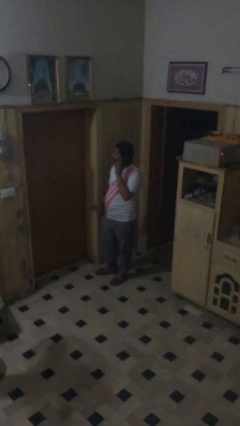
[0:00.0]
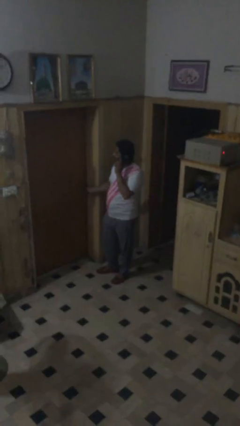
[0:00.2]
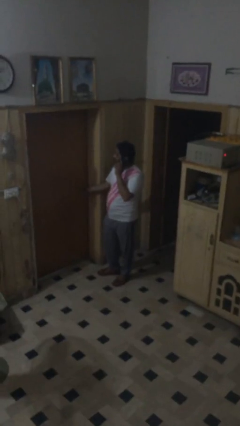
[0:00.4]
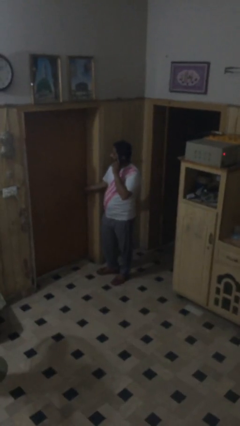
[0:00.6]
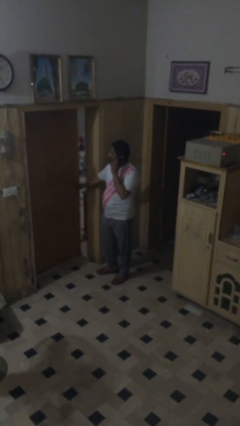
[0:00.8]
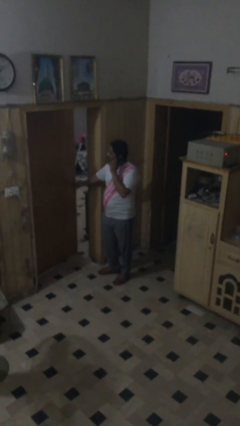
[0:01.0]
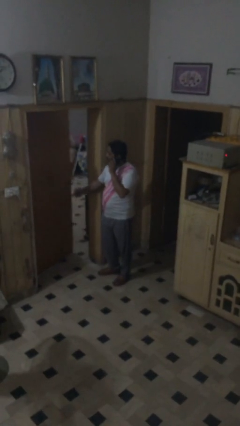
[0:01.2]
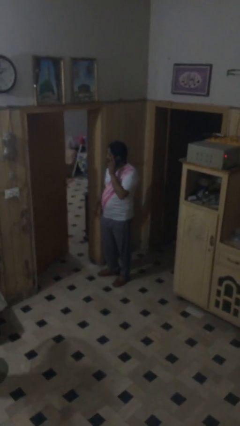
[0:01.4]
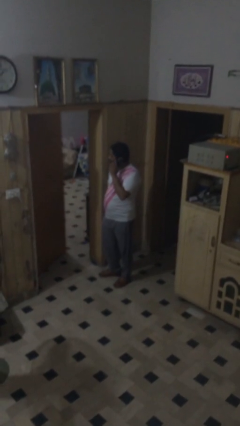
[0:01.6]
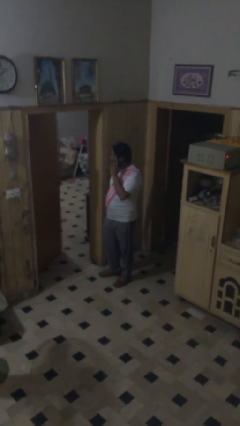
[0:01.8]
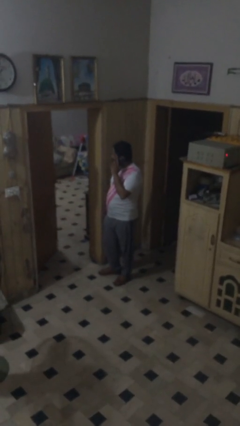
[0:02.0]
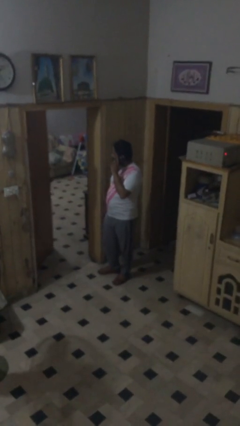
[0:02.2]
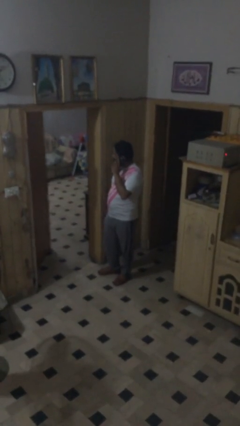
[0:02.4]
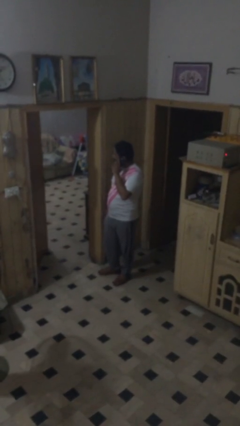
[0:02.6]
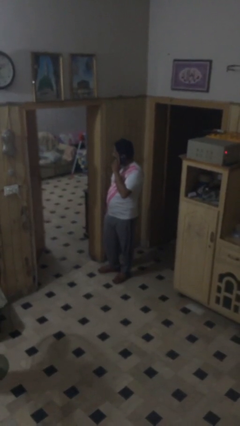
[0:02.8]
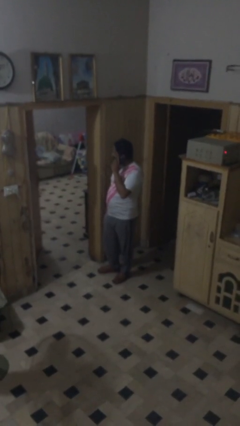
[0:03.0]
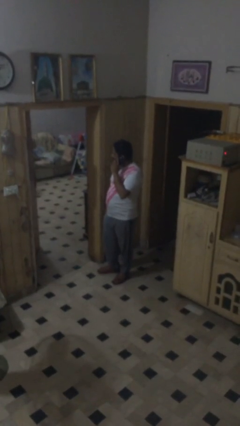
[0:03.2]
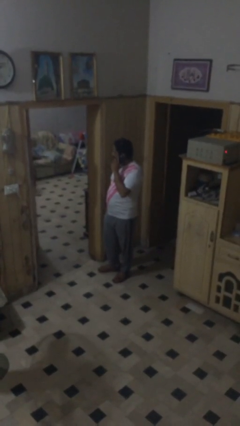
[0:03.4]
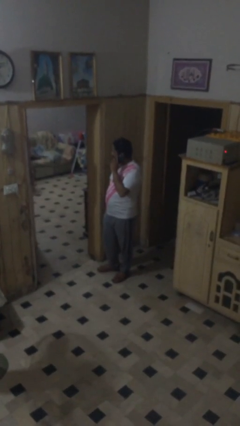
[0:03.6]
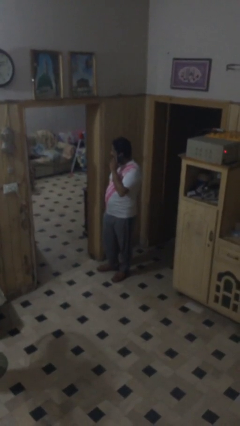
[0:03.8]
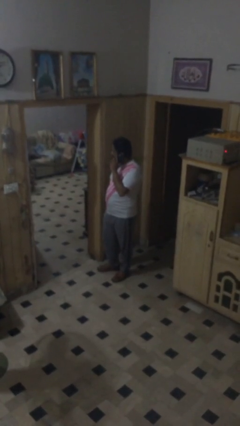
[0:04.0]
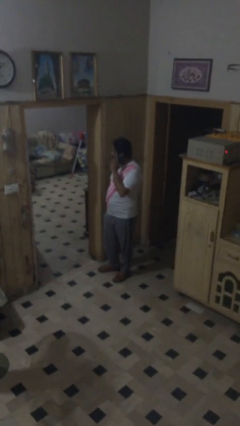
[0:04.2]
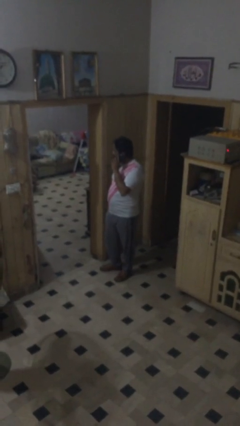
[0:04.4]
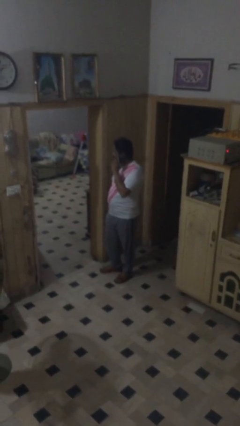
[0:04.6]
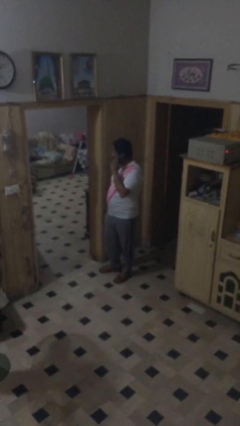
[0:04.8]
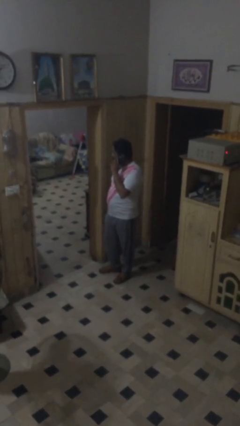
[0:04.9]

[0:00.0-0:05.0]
person opens facility door

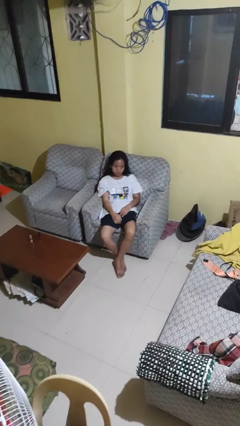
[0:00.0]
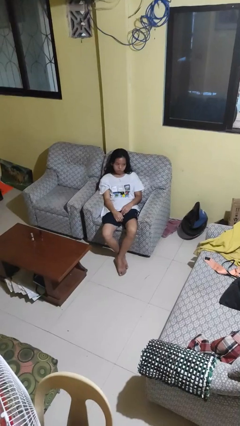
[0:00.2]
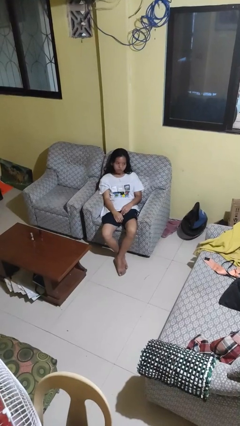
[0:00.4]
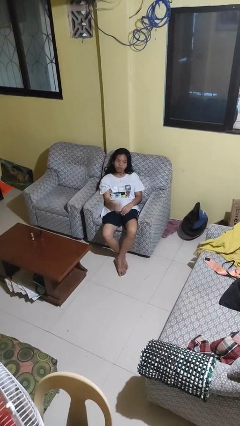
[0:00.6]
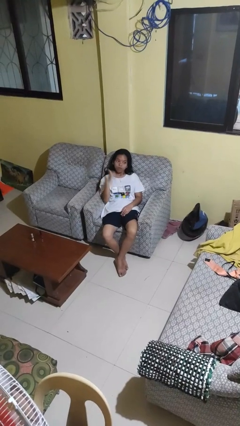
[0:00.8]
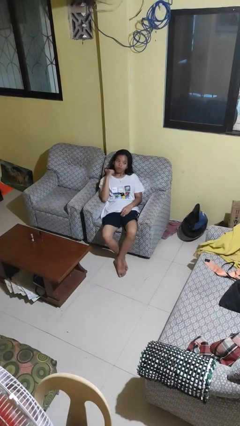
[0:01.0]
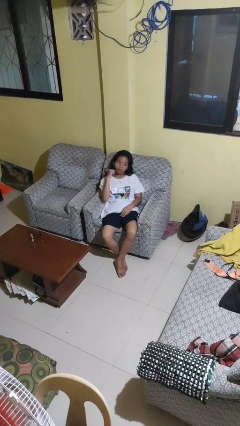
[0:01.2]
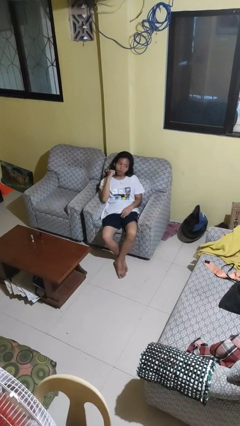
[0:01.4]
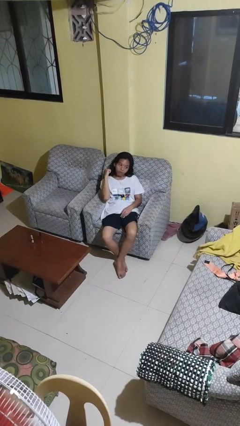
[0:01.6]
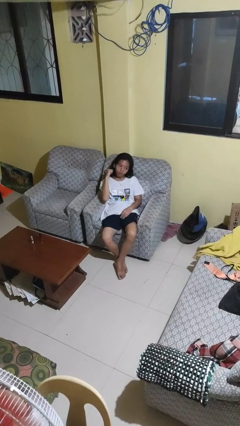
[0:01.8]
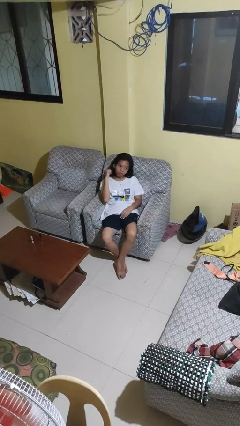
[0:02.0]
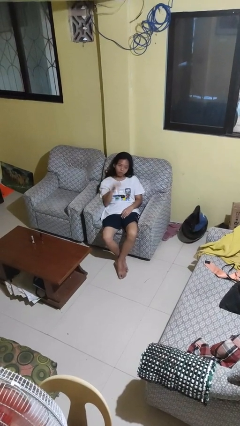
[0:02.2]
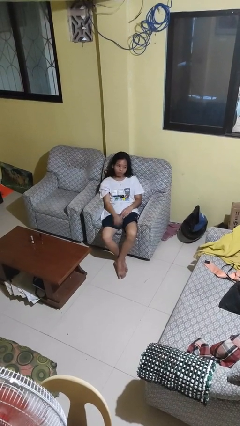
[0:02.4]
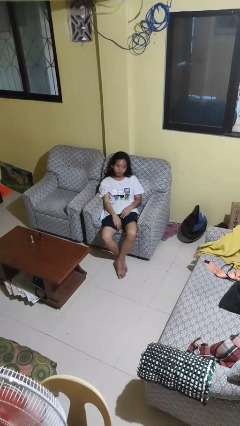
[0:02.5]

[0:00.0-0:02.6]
person gestures behind me

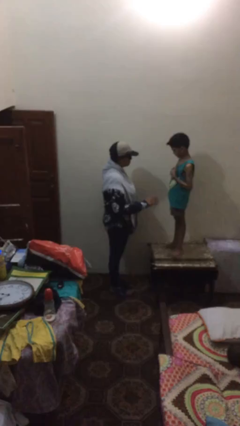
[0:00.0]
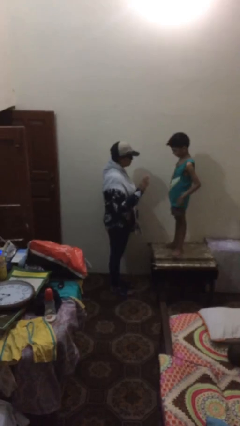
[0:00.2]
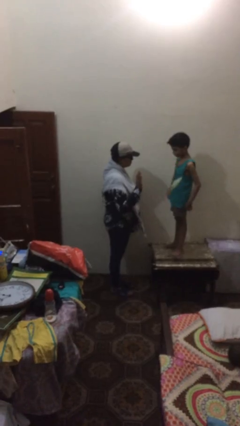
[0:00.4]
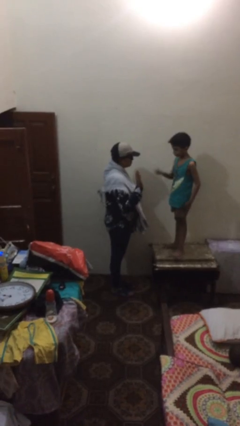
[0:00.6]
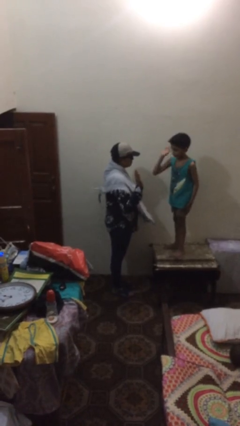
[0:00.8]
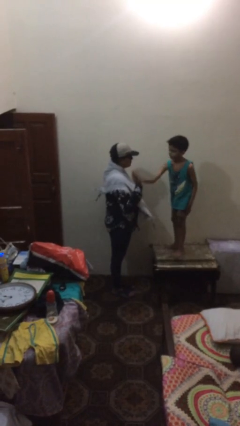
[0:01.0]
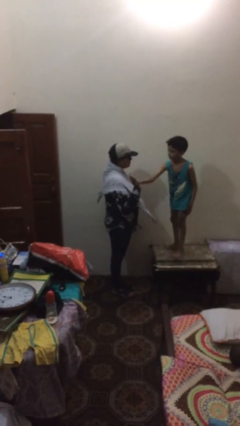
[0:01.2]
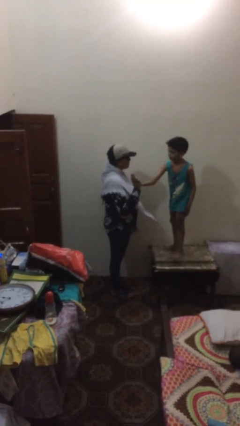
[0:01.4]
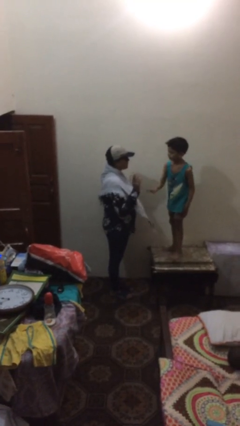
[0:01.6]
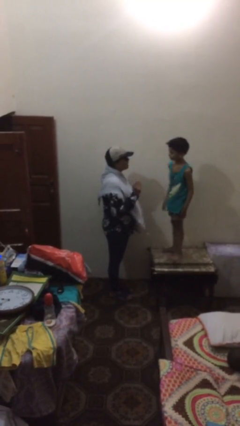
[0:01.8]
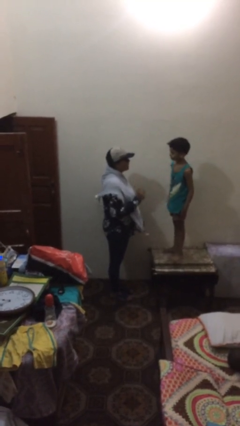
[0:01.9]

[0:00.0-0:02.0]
person highfives hand

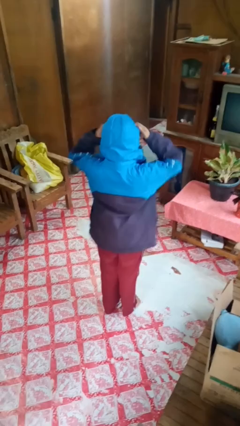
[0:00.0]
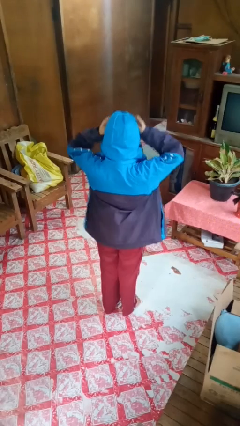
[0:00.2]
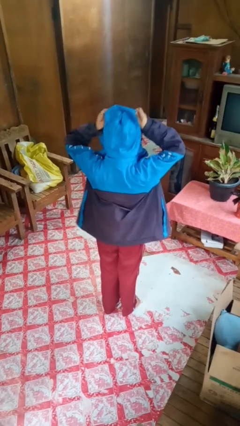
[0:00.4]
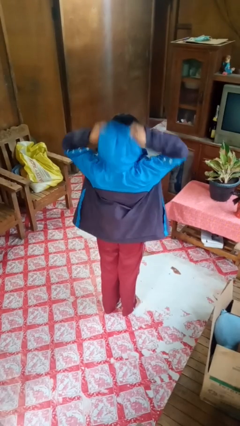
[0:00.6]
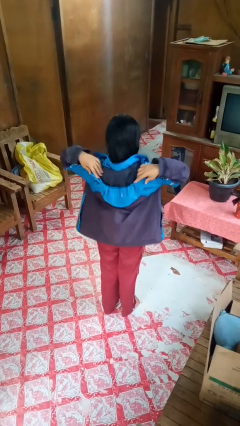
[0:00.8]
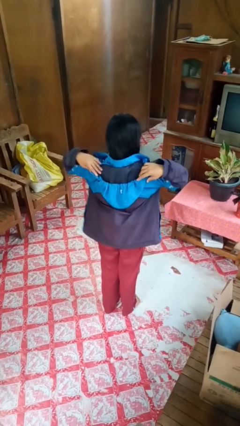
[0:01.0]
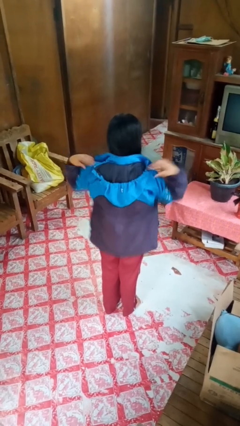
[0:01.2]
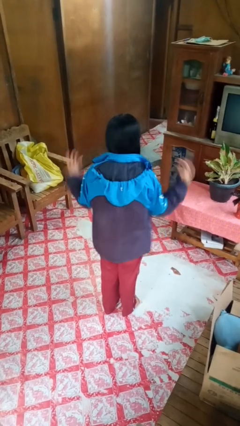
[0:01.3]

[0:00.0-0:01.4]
person takes off hoodie

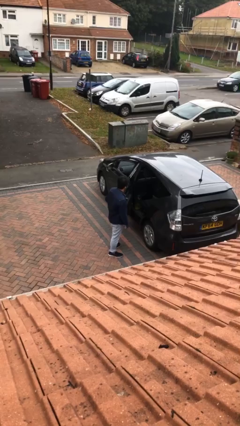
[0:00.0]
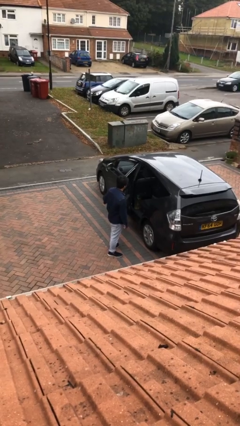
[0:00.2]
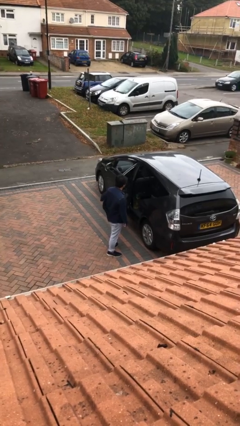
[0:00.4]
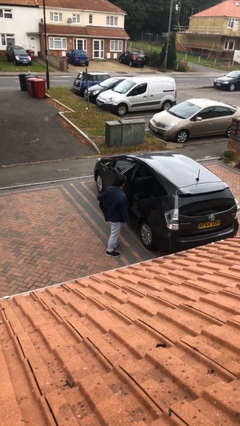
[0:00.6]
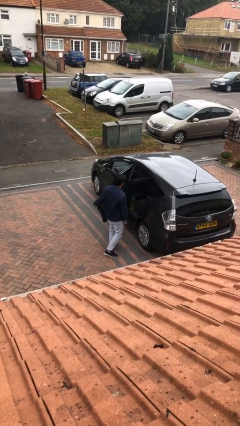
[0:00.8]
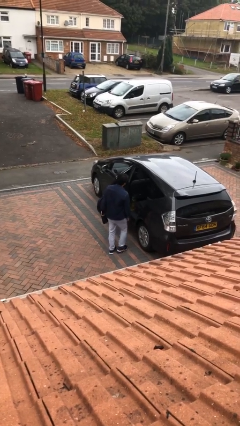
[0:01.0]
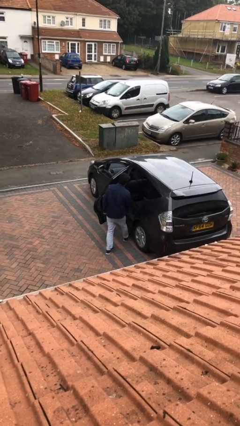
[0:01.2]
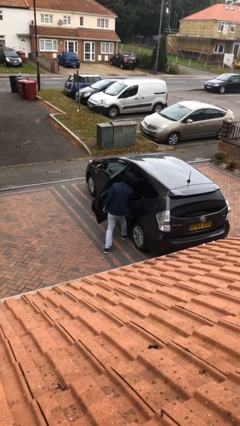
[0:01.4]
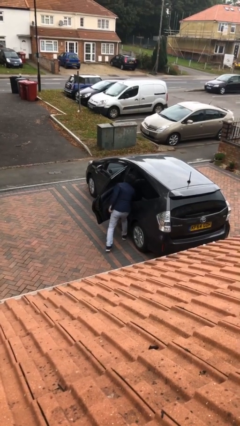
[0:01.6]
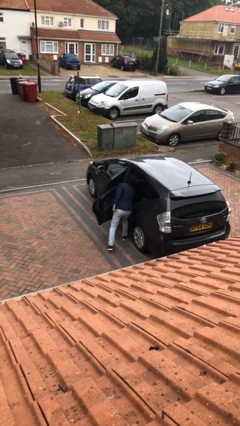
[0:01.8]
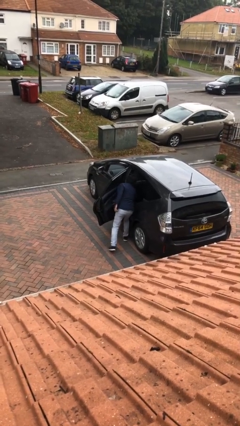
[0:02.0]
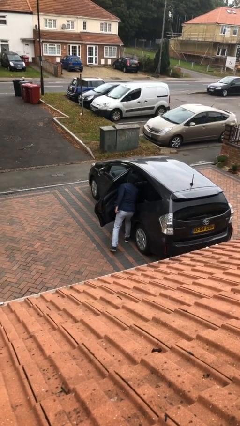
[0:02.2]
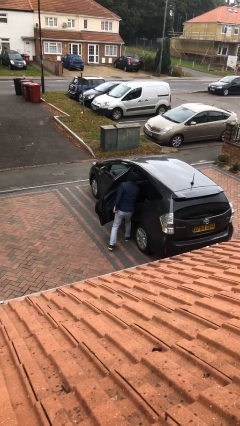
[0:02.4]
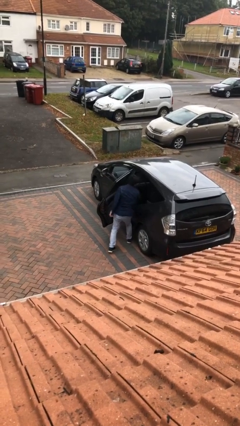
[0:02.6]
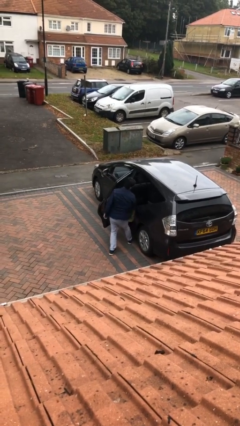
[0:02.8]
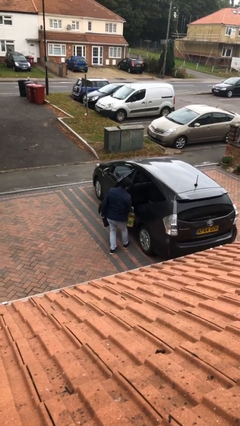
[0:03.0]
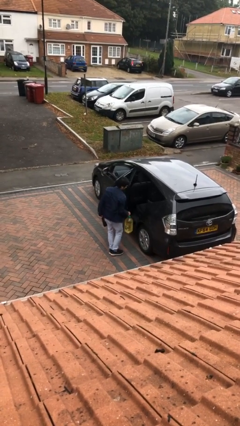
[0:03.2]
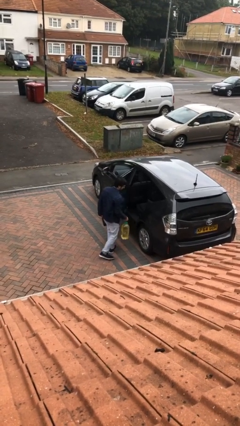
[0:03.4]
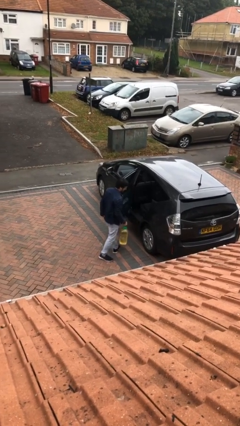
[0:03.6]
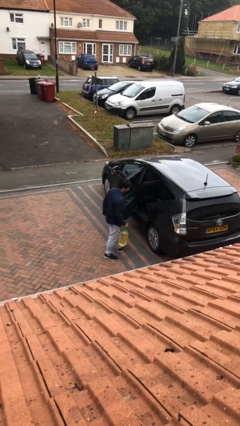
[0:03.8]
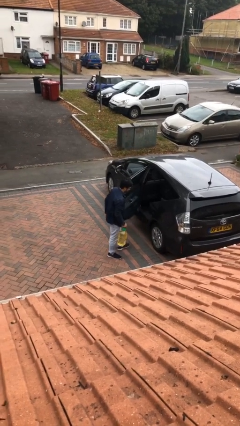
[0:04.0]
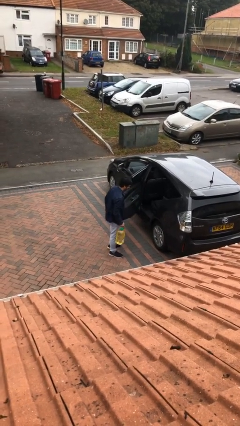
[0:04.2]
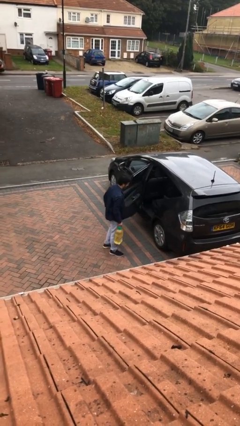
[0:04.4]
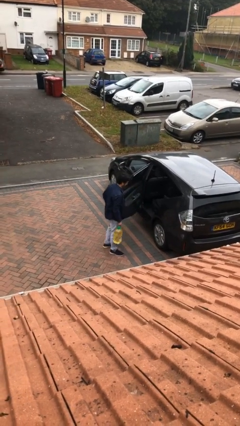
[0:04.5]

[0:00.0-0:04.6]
person unloads car

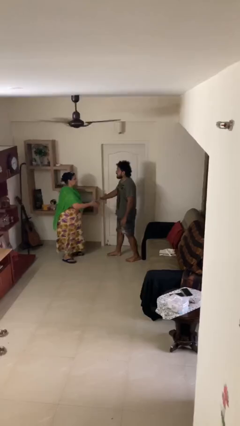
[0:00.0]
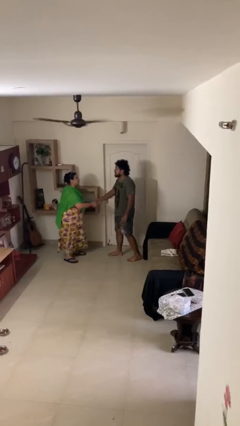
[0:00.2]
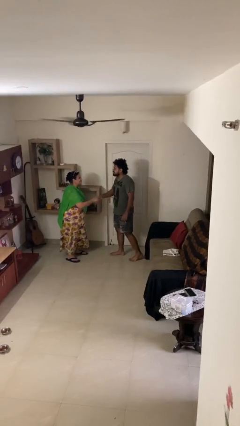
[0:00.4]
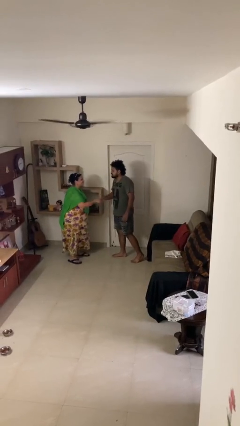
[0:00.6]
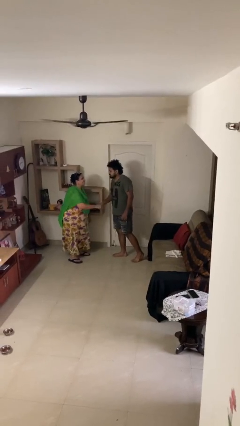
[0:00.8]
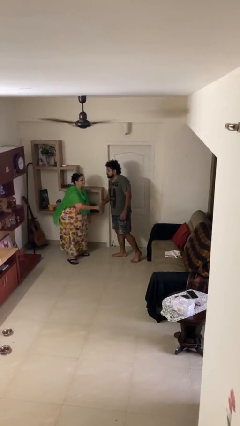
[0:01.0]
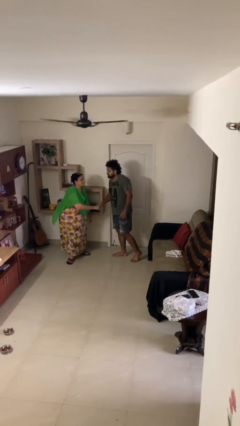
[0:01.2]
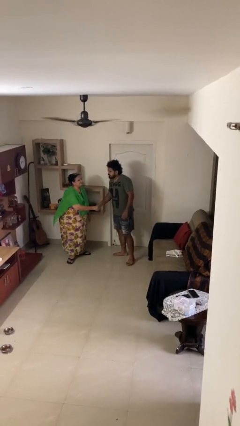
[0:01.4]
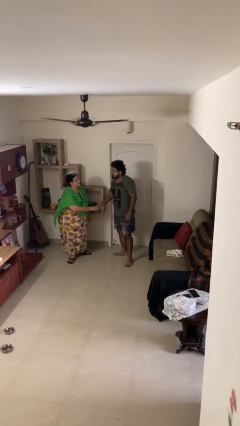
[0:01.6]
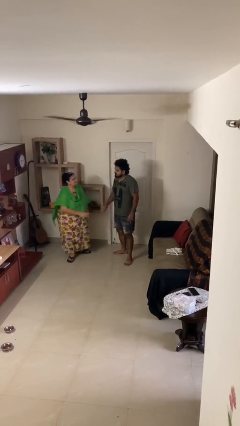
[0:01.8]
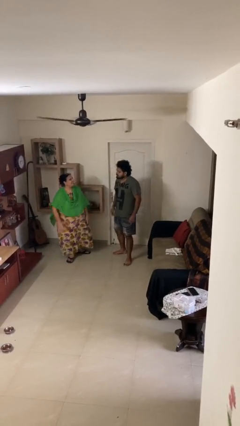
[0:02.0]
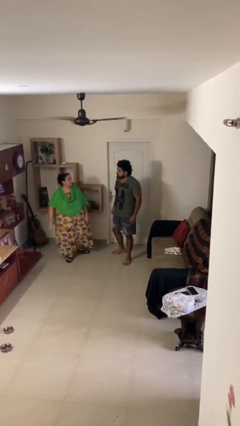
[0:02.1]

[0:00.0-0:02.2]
person shakes hand
